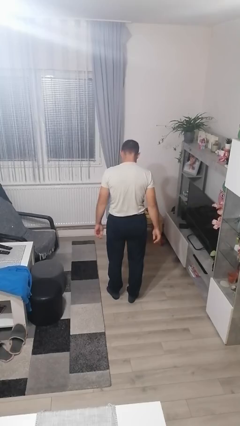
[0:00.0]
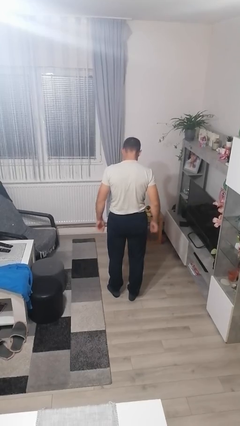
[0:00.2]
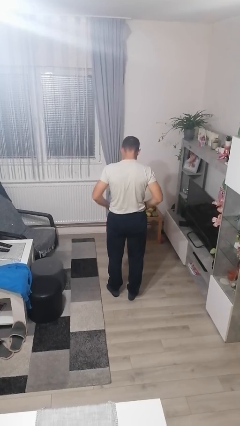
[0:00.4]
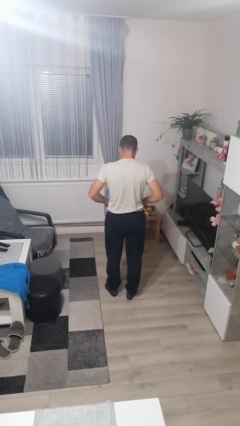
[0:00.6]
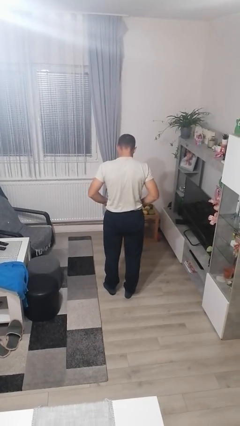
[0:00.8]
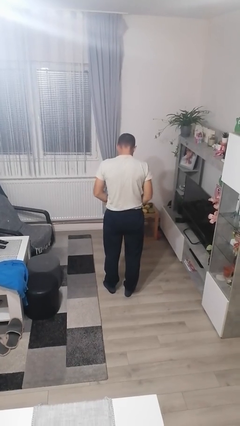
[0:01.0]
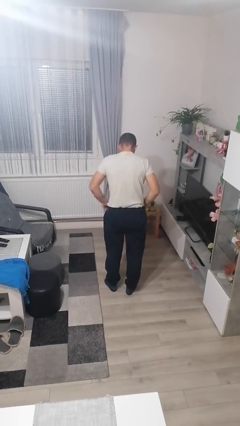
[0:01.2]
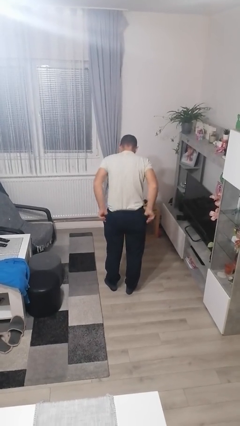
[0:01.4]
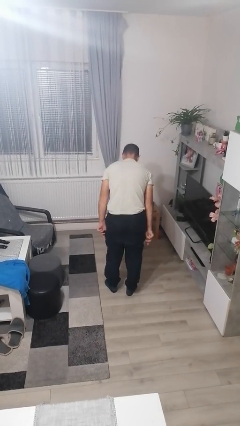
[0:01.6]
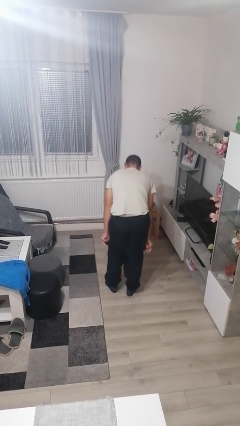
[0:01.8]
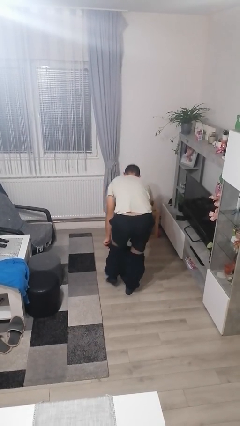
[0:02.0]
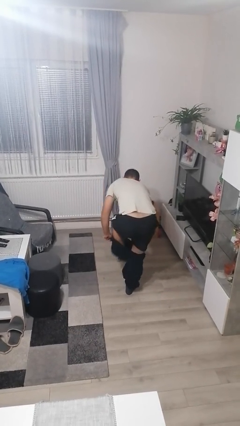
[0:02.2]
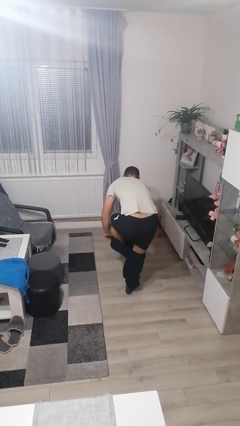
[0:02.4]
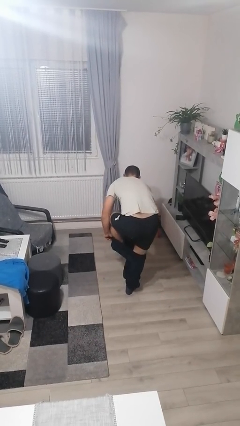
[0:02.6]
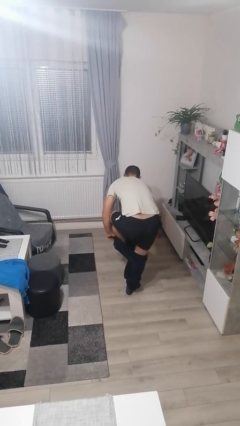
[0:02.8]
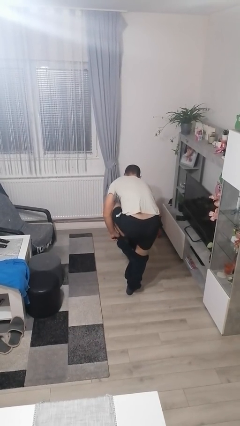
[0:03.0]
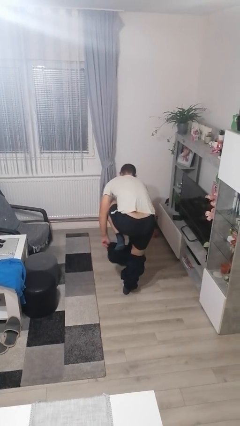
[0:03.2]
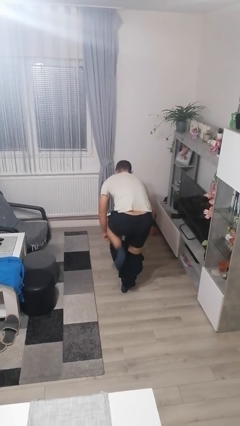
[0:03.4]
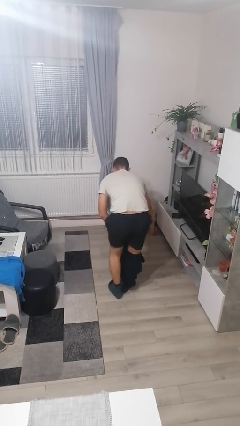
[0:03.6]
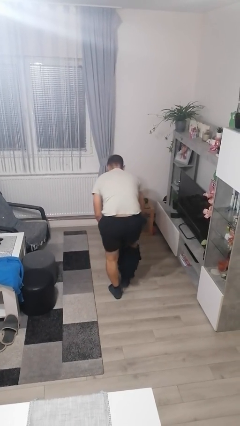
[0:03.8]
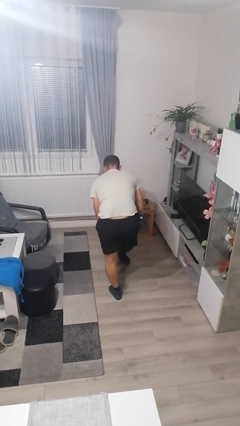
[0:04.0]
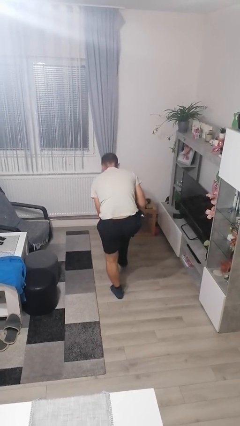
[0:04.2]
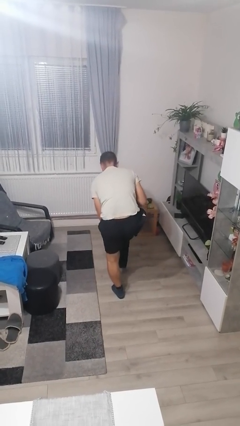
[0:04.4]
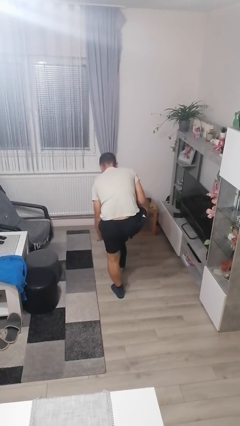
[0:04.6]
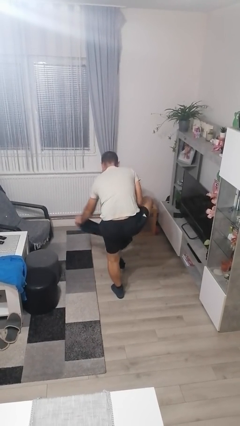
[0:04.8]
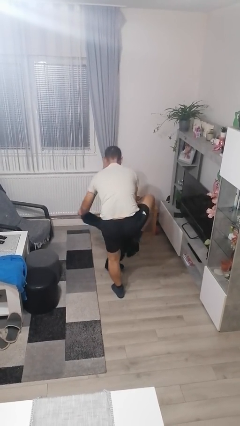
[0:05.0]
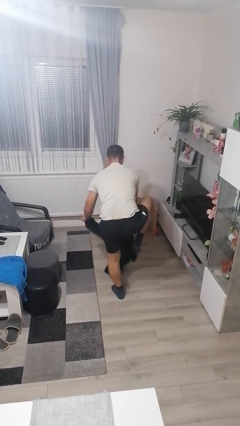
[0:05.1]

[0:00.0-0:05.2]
person takes off pants

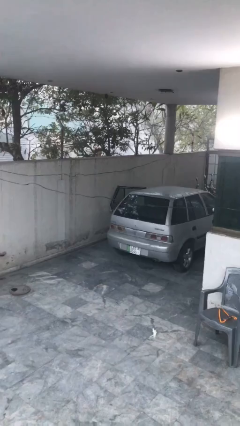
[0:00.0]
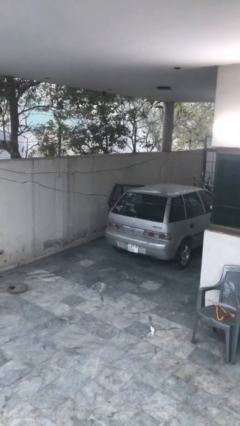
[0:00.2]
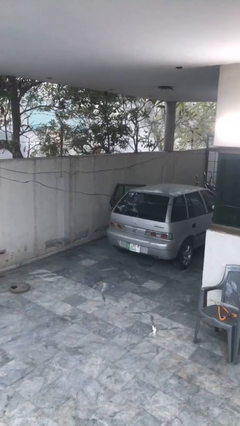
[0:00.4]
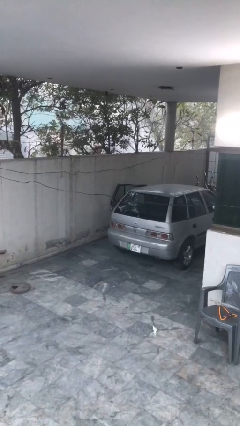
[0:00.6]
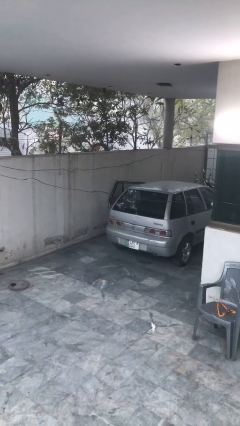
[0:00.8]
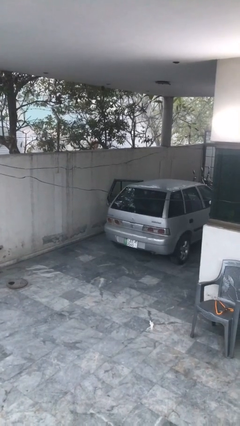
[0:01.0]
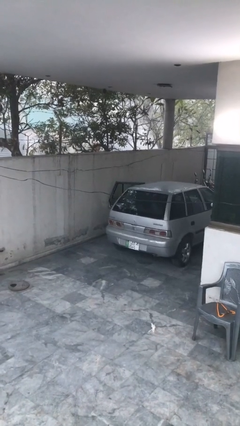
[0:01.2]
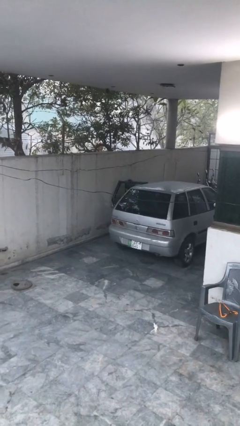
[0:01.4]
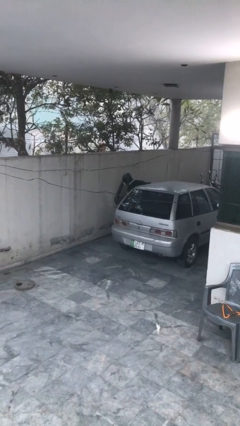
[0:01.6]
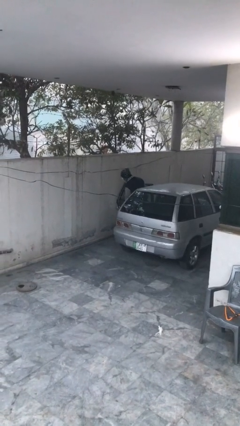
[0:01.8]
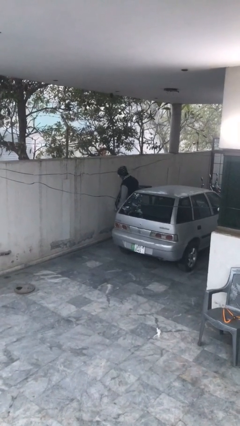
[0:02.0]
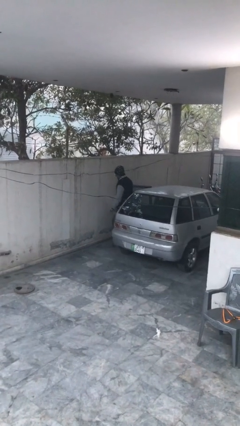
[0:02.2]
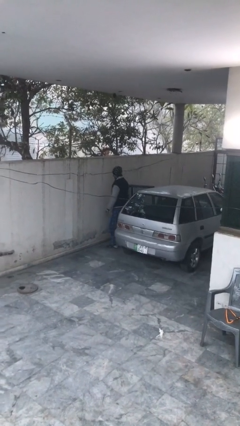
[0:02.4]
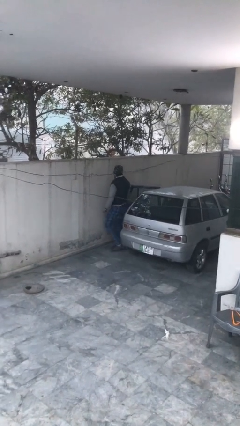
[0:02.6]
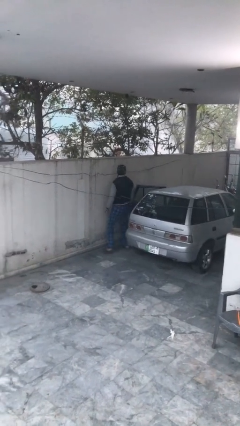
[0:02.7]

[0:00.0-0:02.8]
person exits car

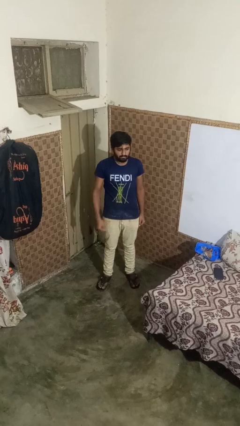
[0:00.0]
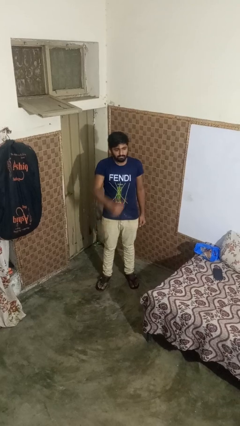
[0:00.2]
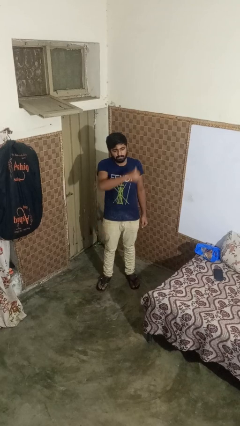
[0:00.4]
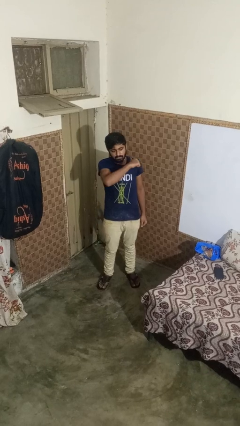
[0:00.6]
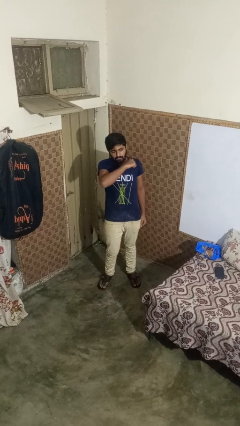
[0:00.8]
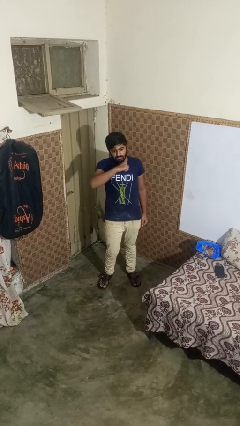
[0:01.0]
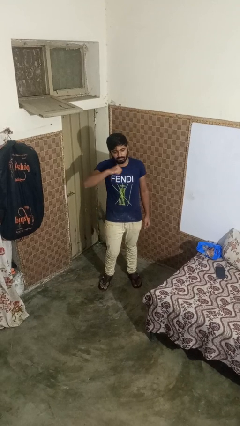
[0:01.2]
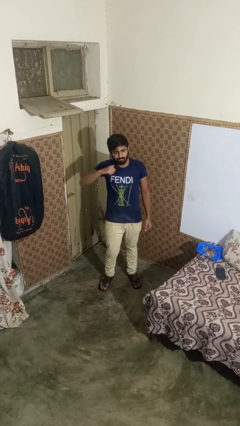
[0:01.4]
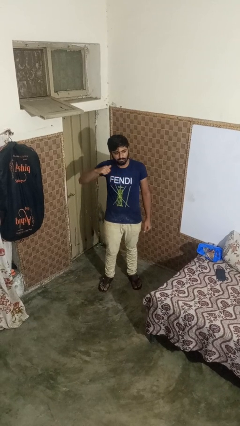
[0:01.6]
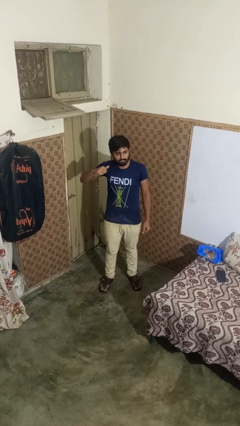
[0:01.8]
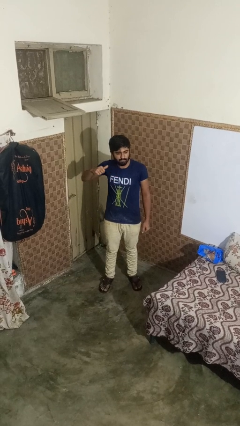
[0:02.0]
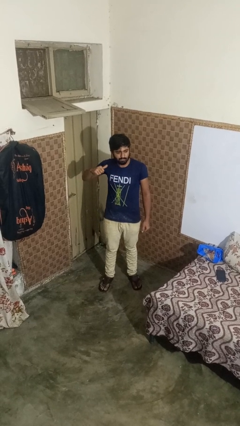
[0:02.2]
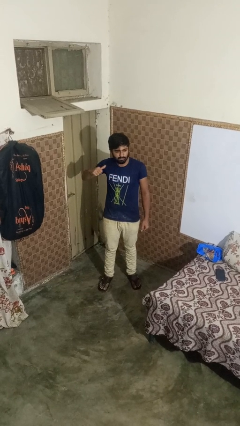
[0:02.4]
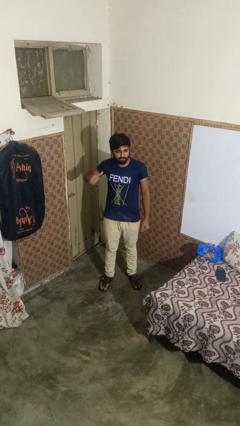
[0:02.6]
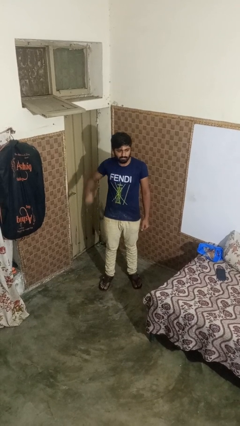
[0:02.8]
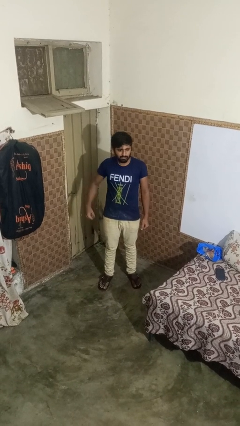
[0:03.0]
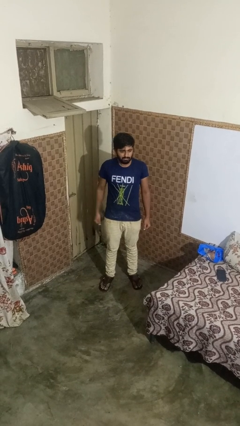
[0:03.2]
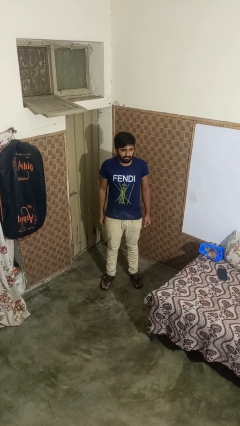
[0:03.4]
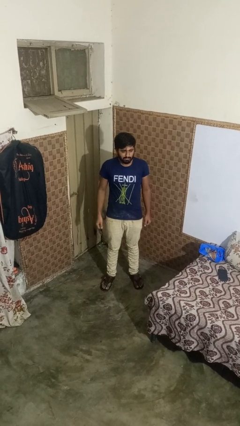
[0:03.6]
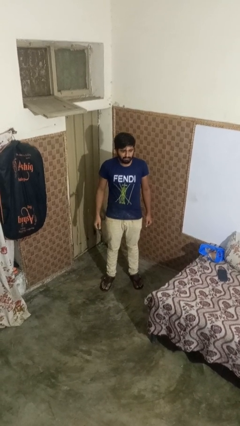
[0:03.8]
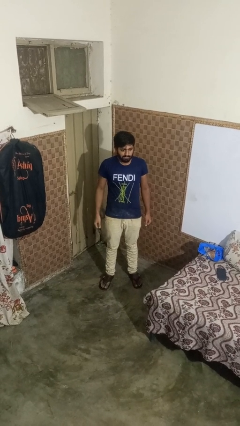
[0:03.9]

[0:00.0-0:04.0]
person gestures cut

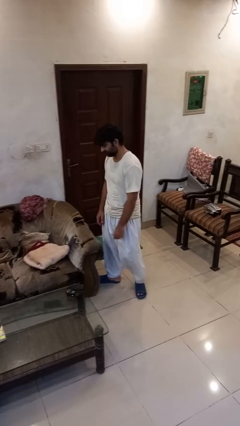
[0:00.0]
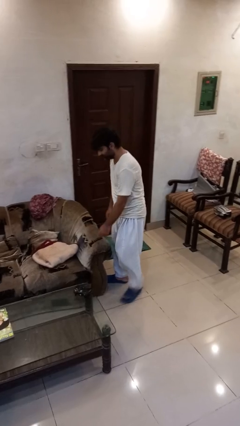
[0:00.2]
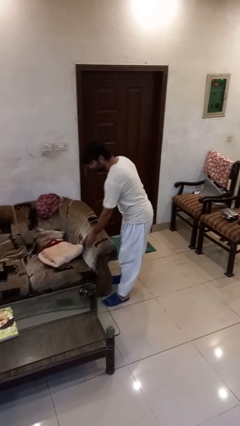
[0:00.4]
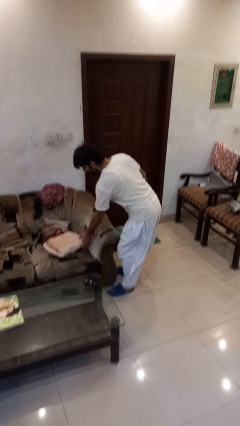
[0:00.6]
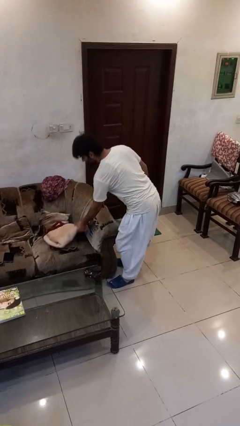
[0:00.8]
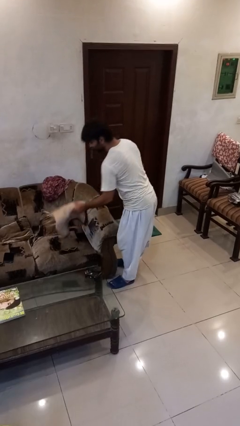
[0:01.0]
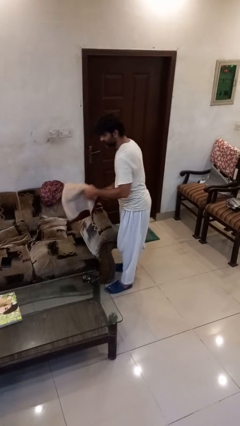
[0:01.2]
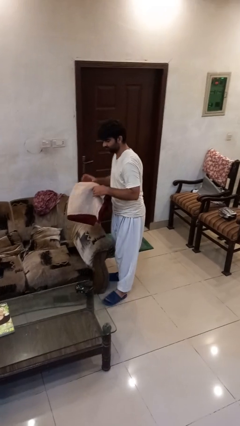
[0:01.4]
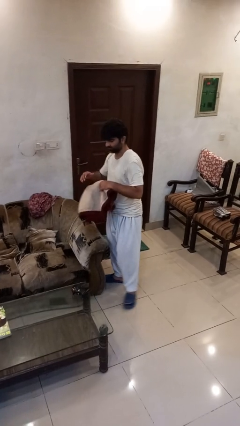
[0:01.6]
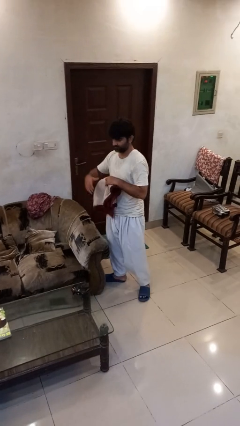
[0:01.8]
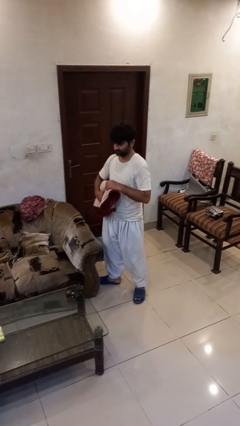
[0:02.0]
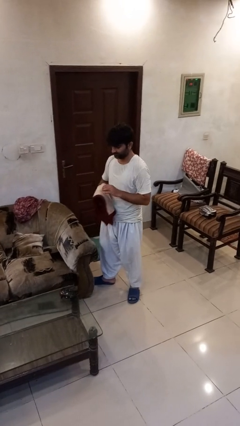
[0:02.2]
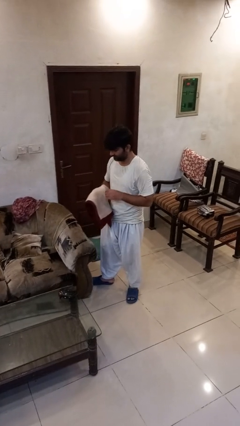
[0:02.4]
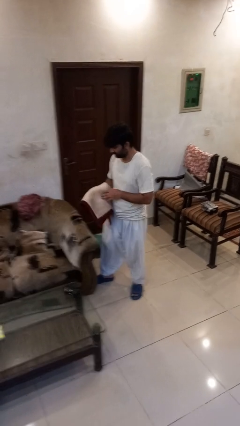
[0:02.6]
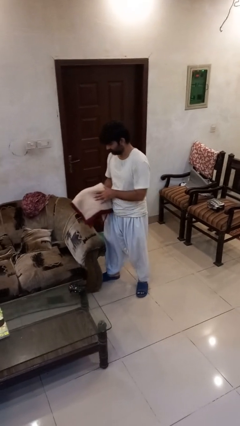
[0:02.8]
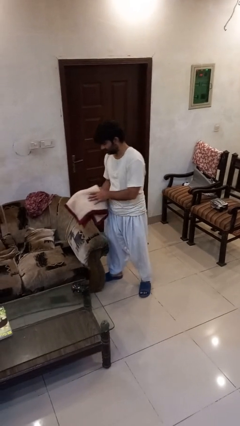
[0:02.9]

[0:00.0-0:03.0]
person picks up object from couch

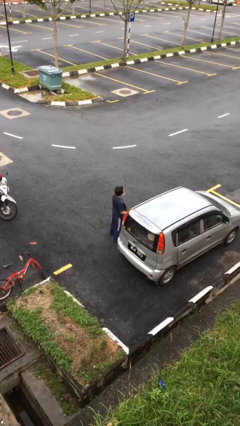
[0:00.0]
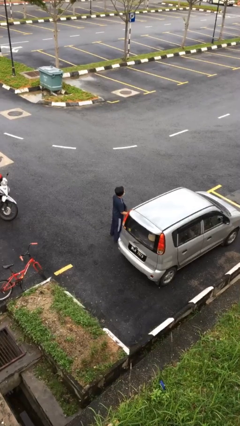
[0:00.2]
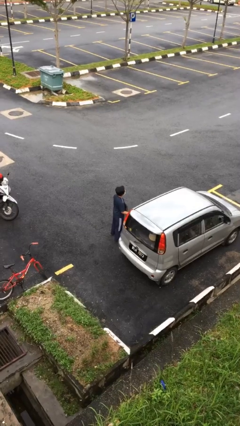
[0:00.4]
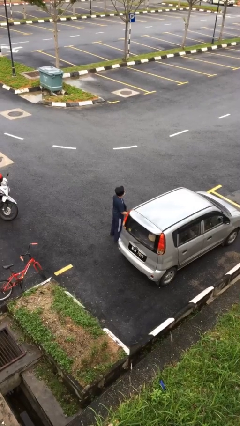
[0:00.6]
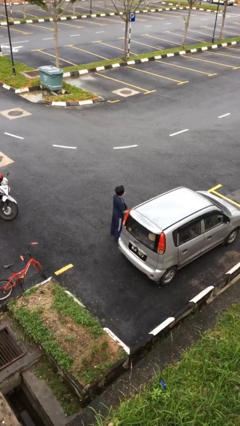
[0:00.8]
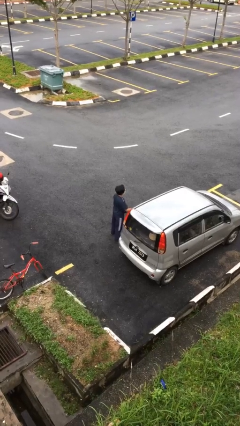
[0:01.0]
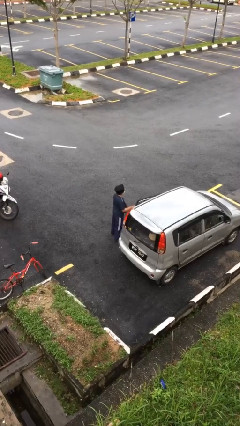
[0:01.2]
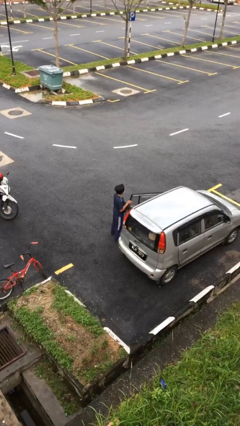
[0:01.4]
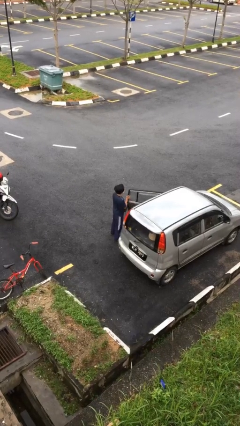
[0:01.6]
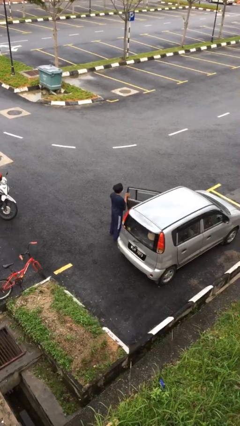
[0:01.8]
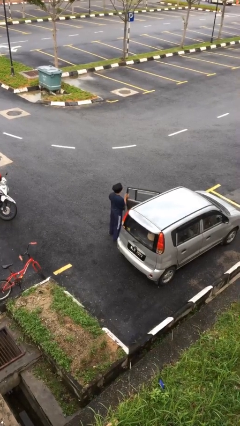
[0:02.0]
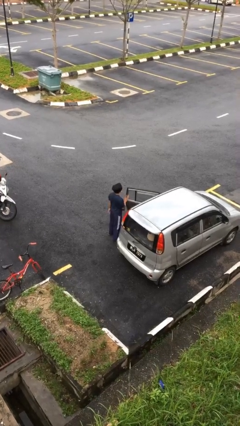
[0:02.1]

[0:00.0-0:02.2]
person opens car door

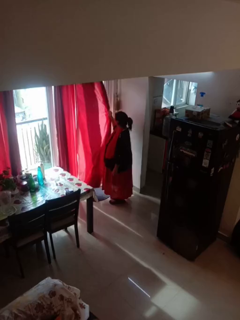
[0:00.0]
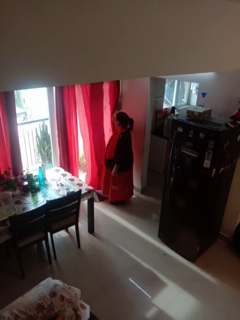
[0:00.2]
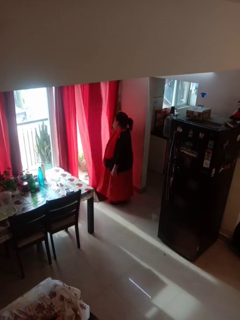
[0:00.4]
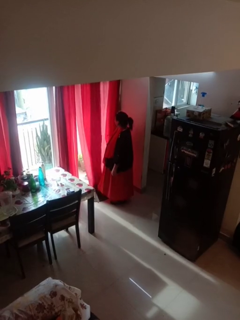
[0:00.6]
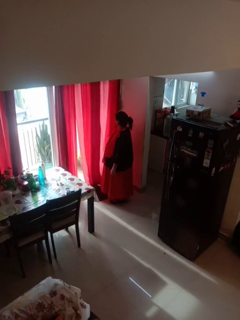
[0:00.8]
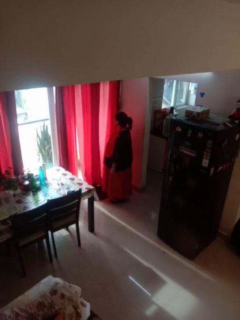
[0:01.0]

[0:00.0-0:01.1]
person closes curtains
